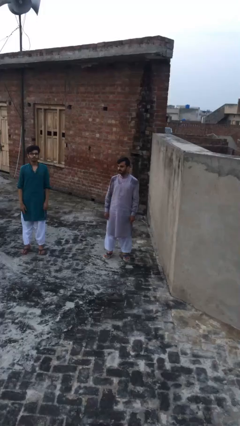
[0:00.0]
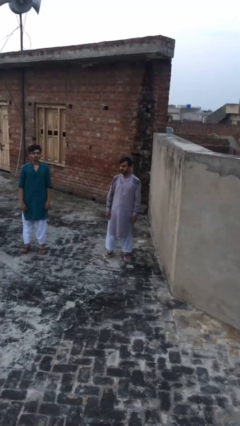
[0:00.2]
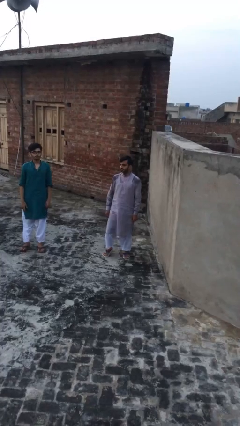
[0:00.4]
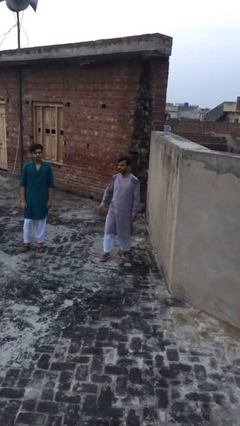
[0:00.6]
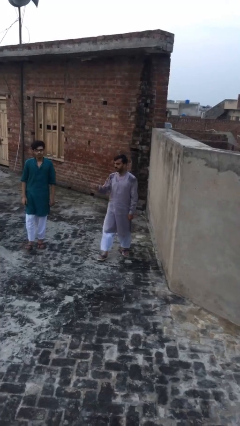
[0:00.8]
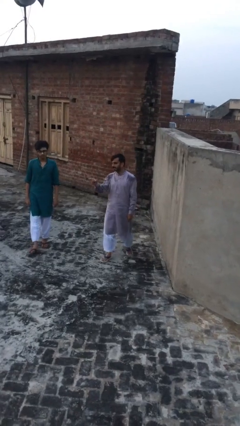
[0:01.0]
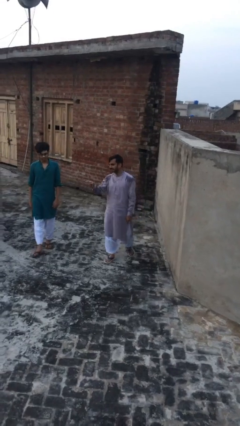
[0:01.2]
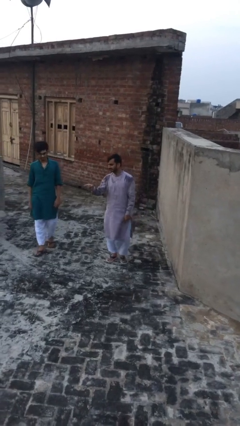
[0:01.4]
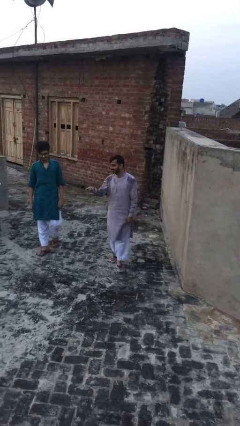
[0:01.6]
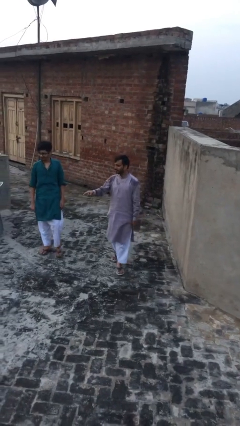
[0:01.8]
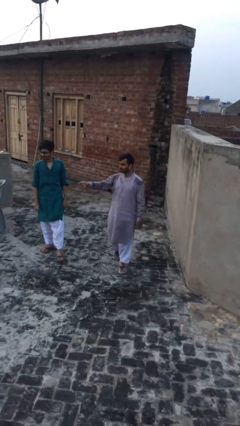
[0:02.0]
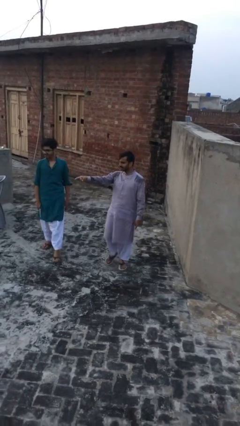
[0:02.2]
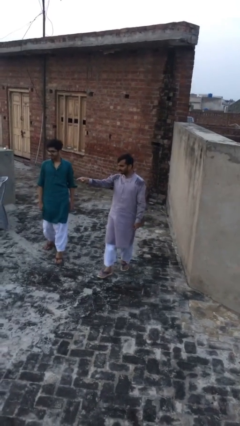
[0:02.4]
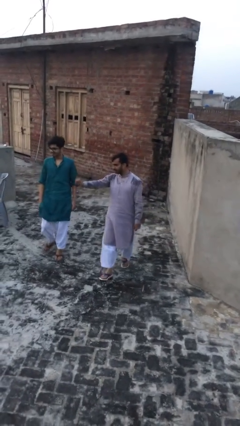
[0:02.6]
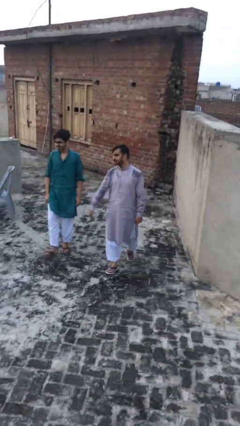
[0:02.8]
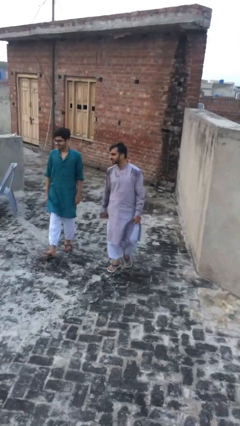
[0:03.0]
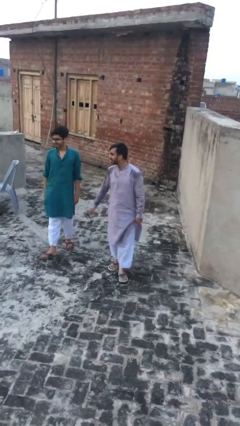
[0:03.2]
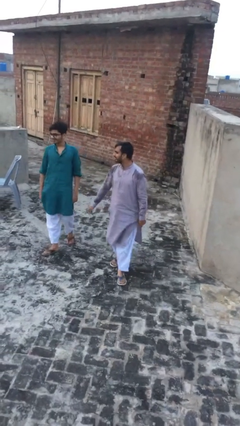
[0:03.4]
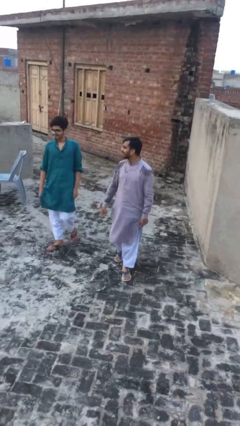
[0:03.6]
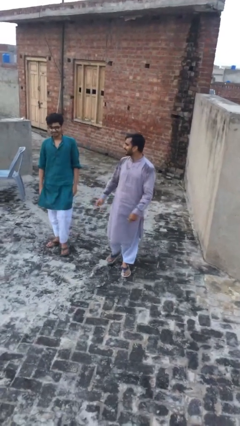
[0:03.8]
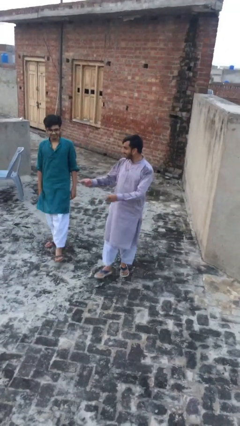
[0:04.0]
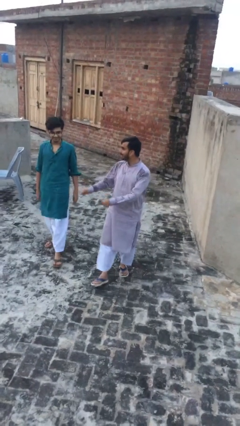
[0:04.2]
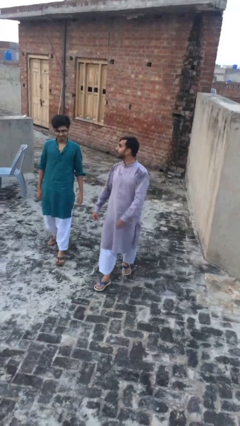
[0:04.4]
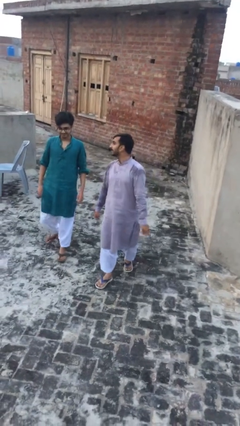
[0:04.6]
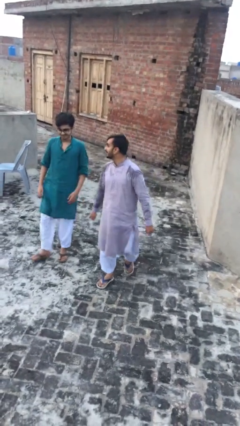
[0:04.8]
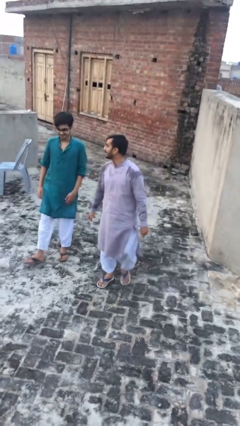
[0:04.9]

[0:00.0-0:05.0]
person talks to person

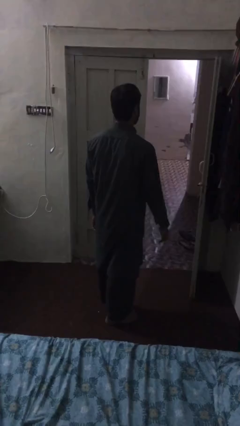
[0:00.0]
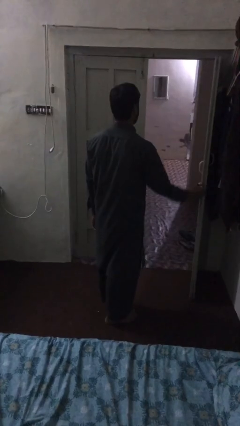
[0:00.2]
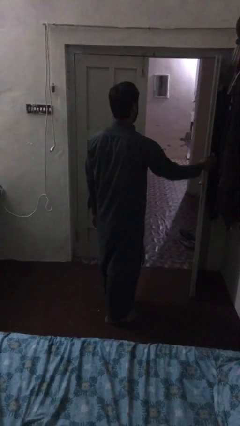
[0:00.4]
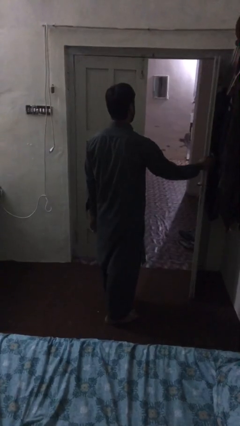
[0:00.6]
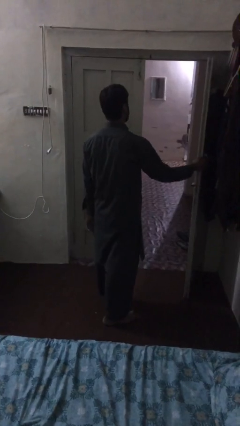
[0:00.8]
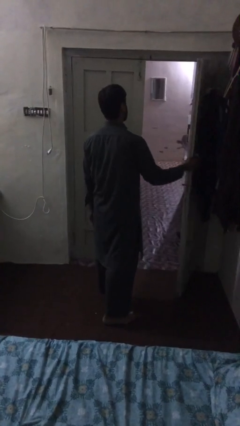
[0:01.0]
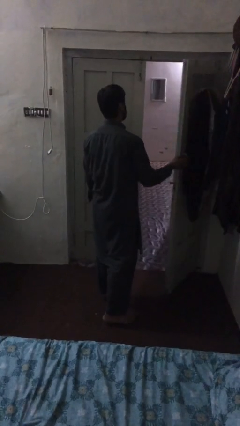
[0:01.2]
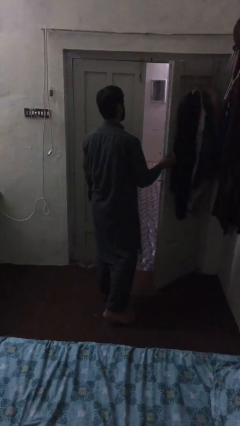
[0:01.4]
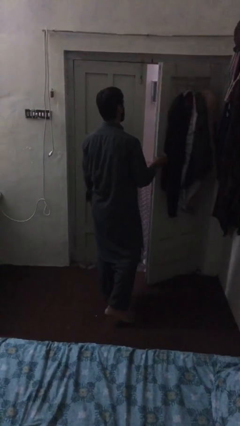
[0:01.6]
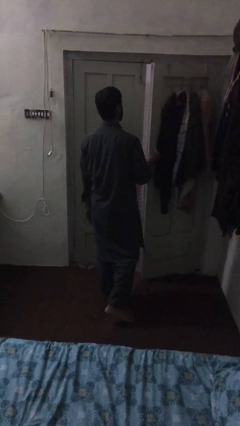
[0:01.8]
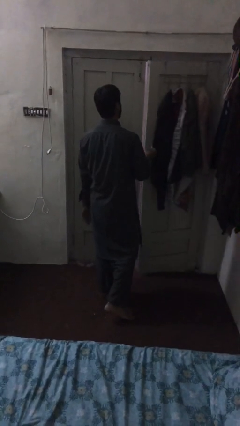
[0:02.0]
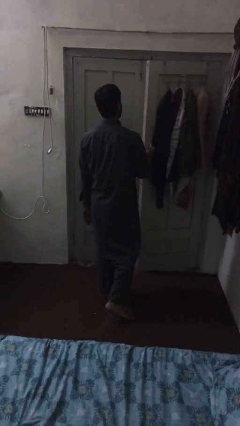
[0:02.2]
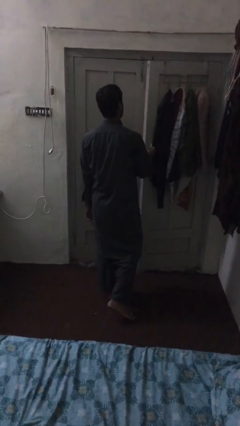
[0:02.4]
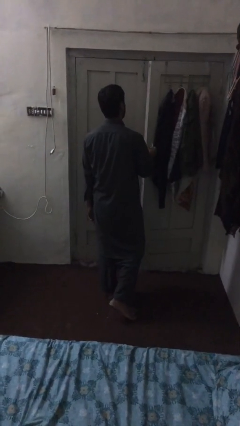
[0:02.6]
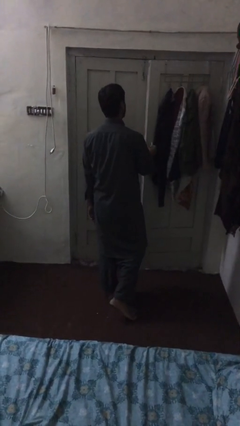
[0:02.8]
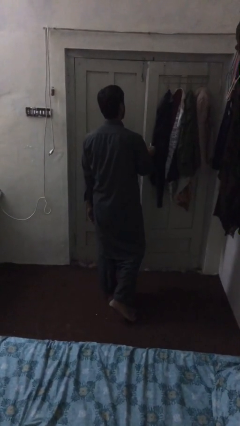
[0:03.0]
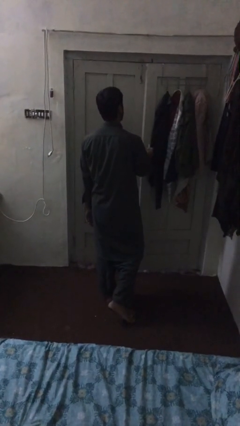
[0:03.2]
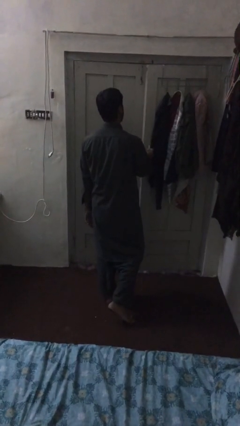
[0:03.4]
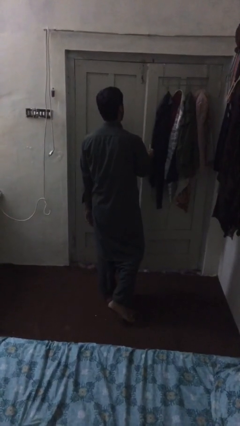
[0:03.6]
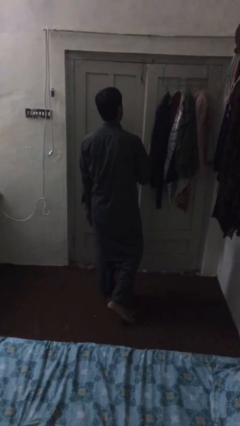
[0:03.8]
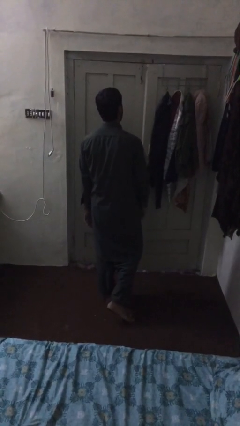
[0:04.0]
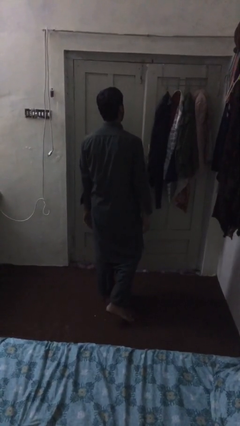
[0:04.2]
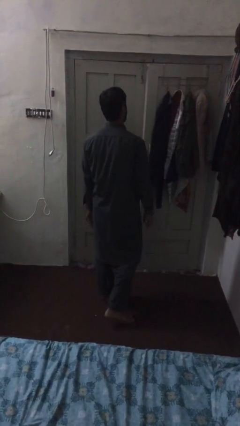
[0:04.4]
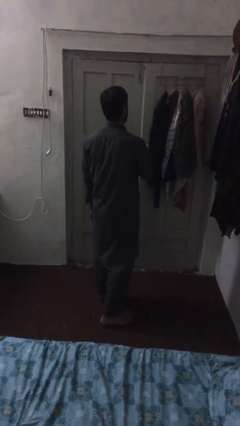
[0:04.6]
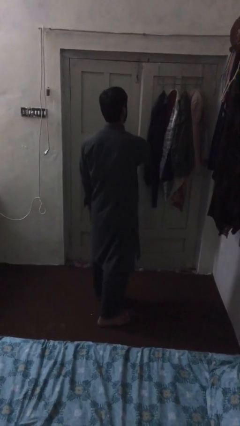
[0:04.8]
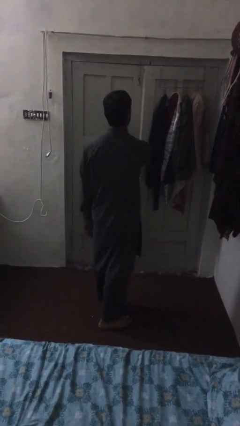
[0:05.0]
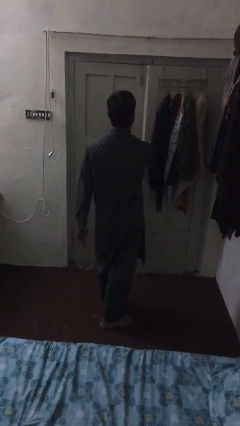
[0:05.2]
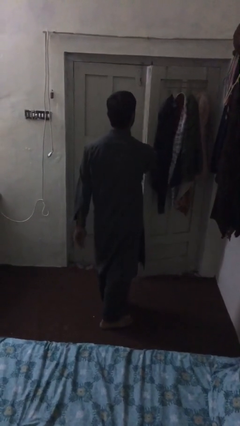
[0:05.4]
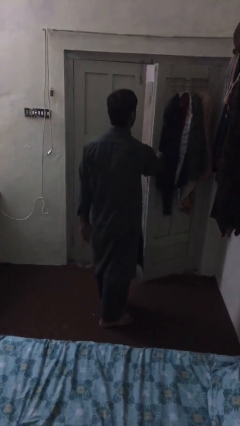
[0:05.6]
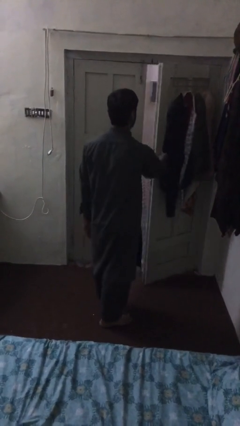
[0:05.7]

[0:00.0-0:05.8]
person closes facility door

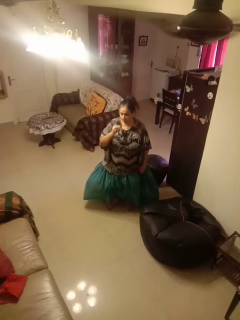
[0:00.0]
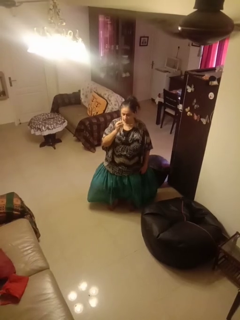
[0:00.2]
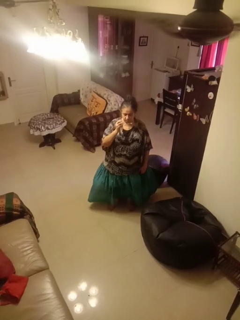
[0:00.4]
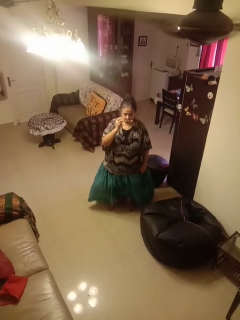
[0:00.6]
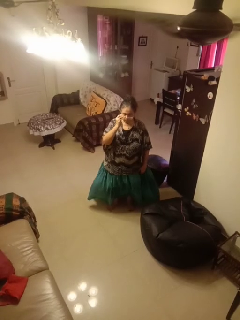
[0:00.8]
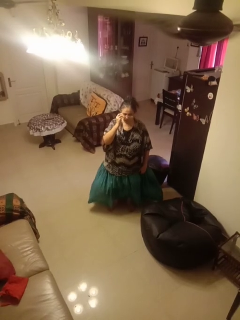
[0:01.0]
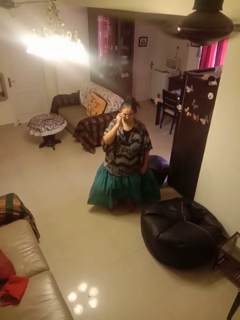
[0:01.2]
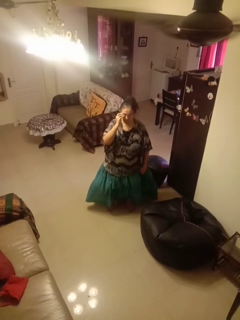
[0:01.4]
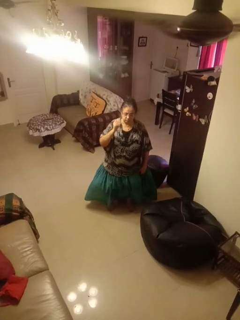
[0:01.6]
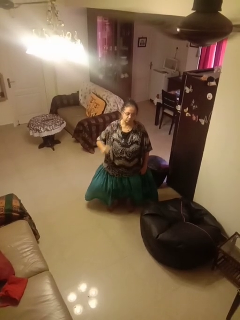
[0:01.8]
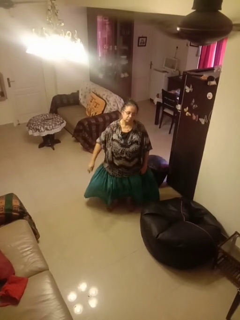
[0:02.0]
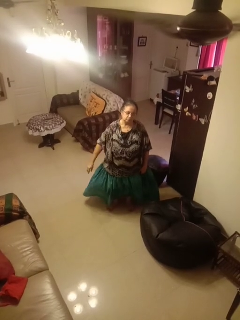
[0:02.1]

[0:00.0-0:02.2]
person puts on glasses

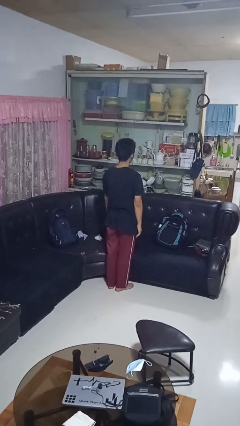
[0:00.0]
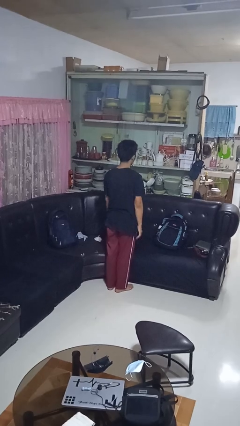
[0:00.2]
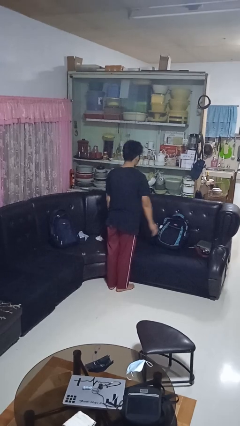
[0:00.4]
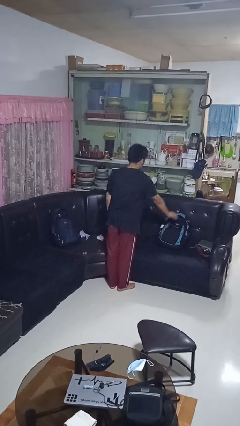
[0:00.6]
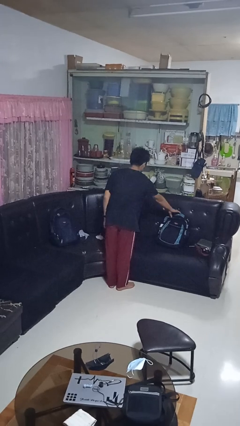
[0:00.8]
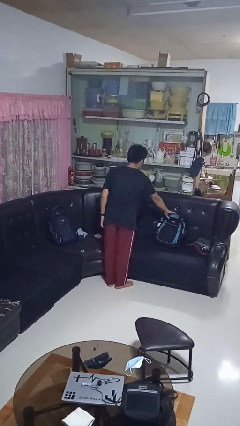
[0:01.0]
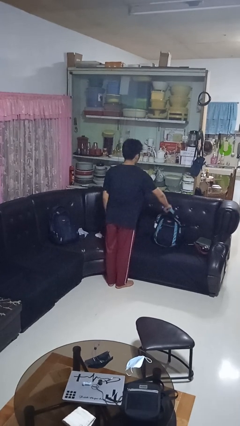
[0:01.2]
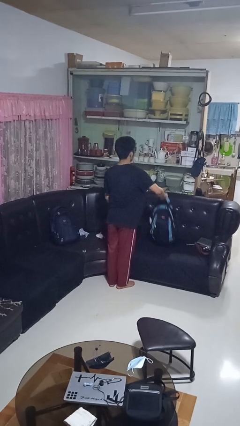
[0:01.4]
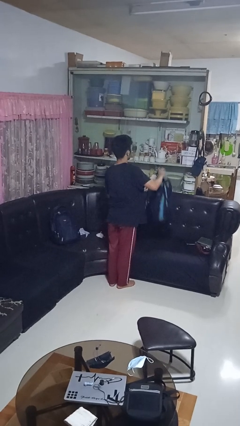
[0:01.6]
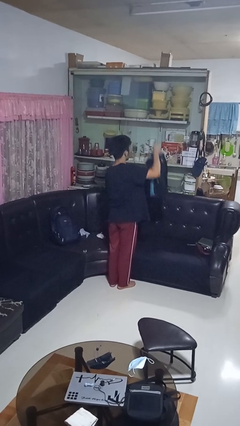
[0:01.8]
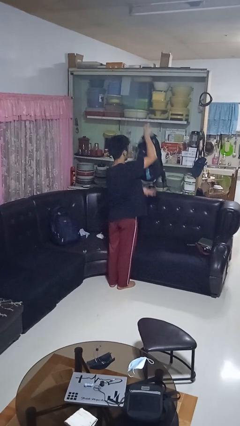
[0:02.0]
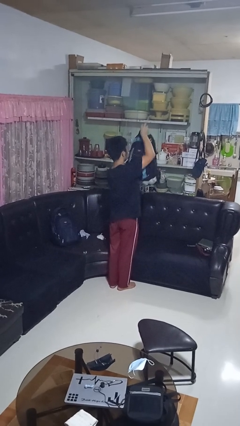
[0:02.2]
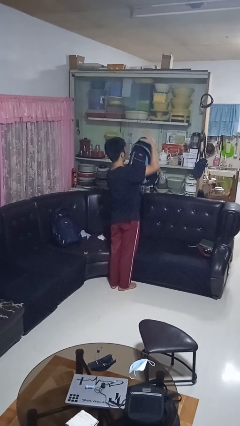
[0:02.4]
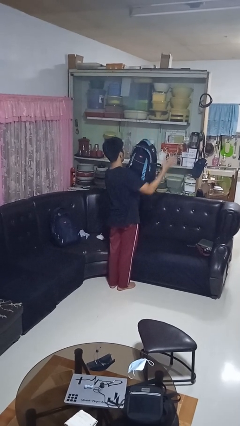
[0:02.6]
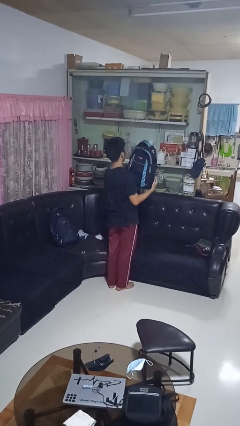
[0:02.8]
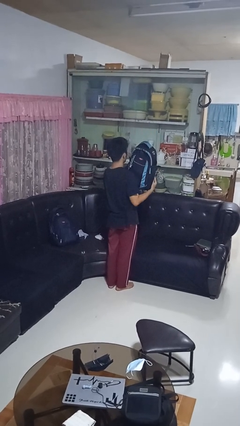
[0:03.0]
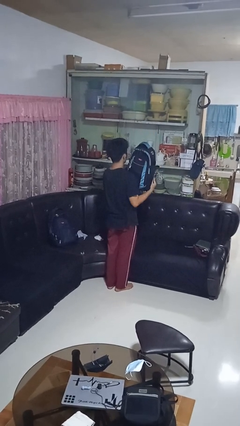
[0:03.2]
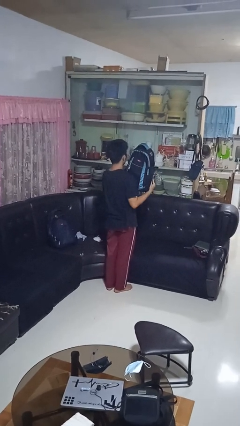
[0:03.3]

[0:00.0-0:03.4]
person picks up object from couch

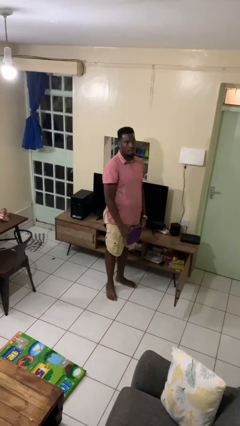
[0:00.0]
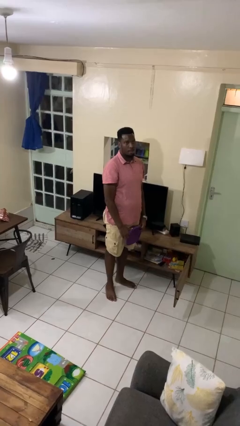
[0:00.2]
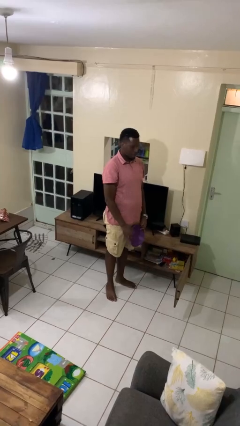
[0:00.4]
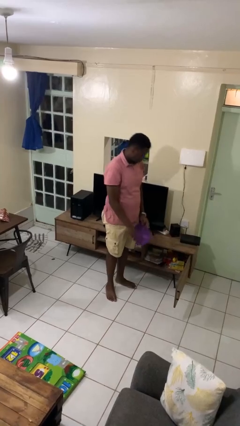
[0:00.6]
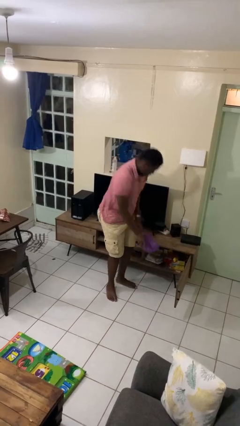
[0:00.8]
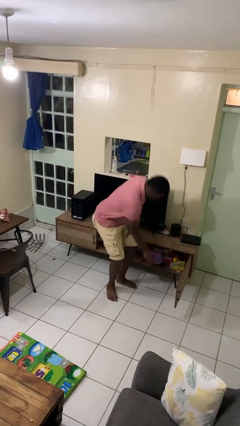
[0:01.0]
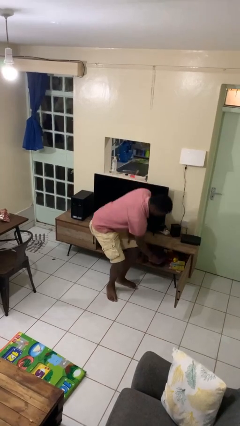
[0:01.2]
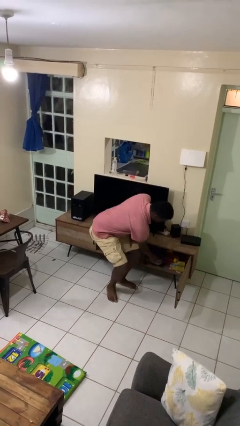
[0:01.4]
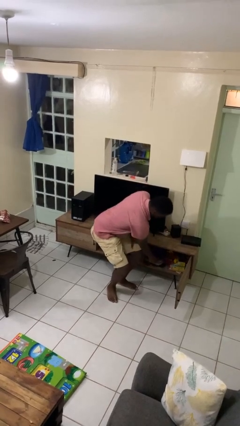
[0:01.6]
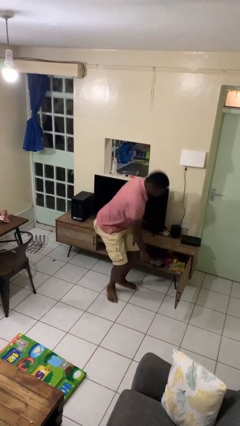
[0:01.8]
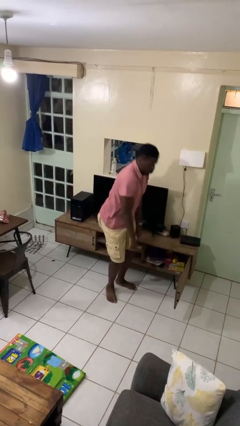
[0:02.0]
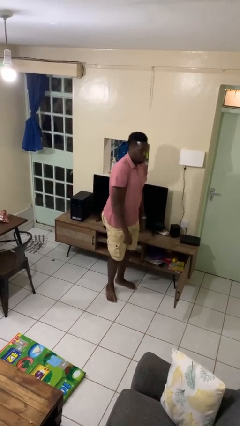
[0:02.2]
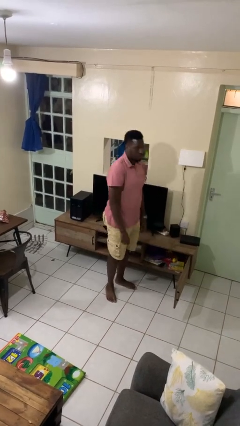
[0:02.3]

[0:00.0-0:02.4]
person puts down object into cabinet
